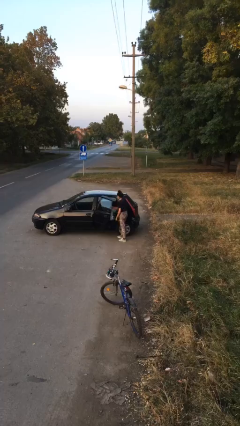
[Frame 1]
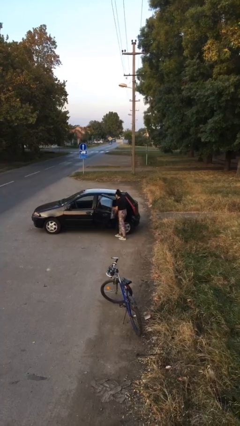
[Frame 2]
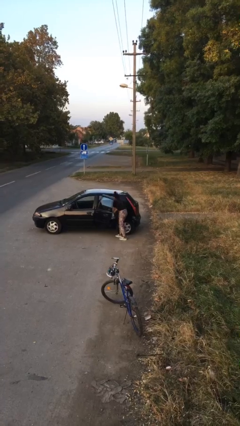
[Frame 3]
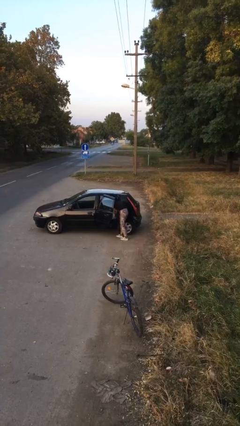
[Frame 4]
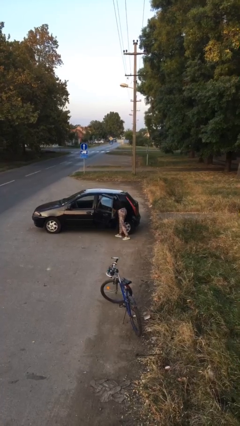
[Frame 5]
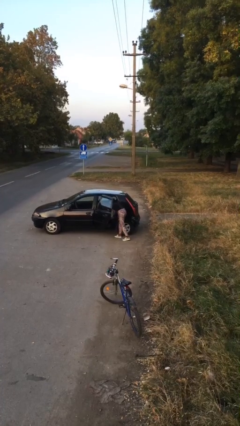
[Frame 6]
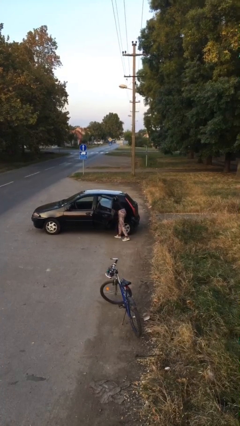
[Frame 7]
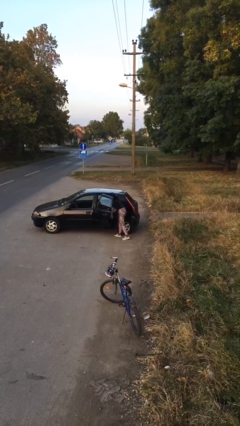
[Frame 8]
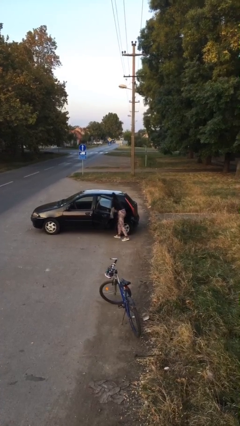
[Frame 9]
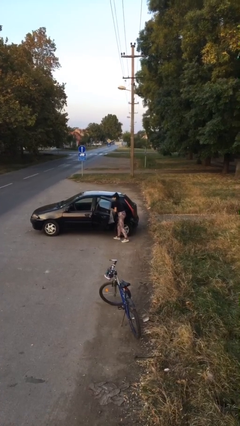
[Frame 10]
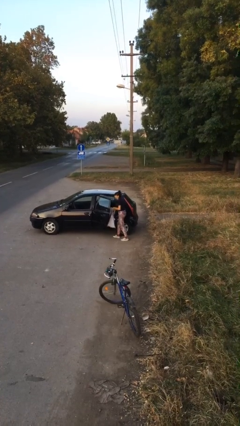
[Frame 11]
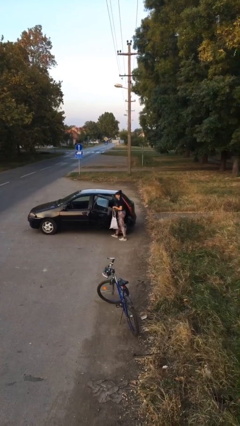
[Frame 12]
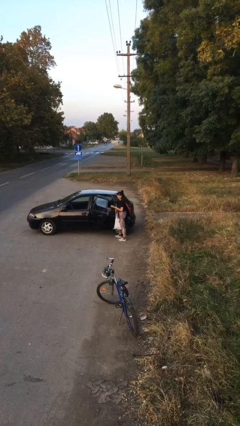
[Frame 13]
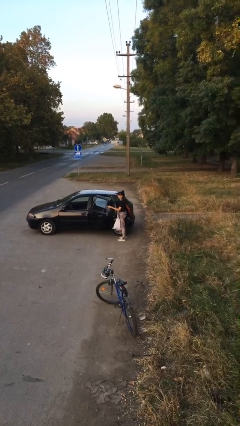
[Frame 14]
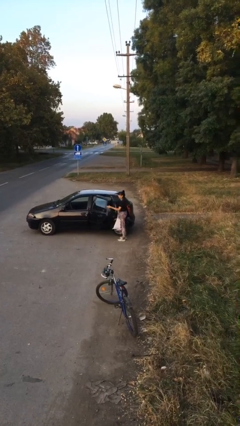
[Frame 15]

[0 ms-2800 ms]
person unloads car

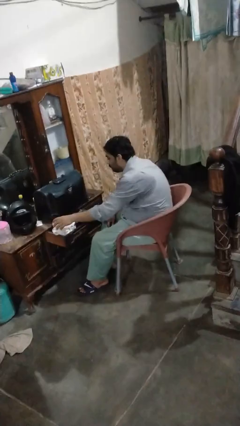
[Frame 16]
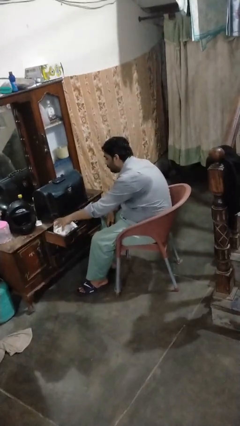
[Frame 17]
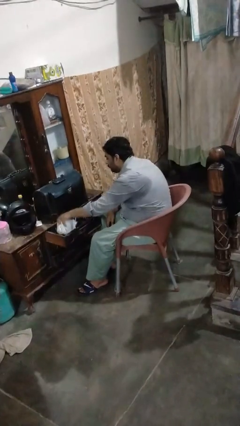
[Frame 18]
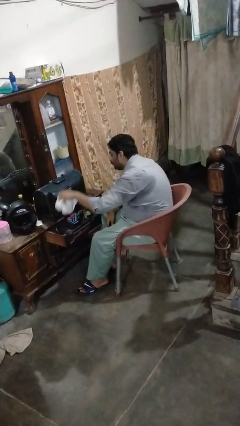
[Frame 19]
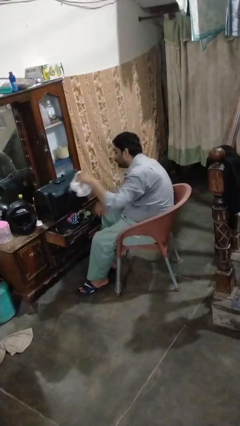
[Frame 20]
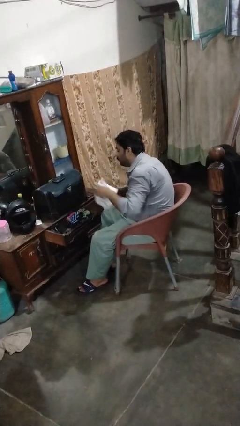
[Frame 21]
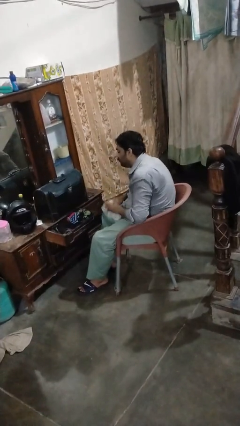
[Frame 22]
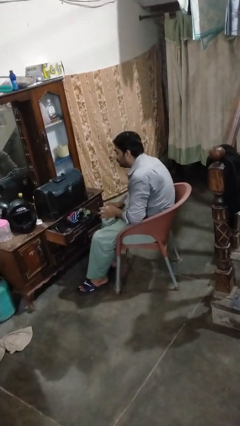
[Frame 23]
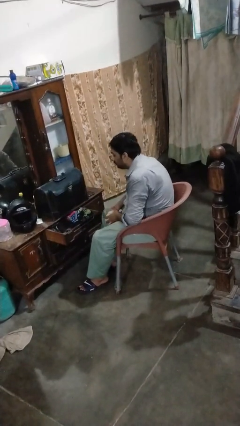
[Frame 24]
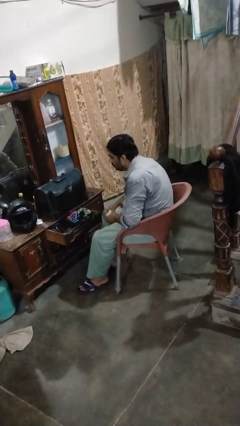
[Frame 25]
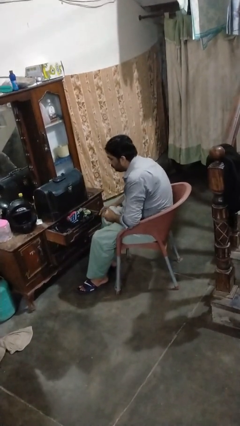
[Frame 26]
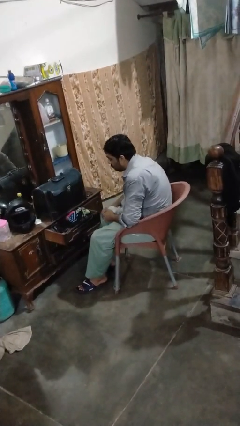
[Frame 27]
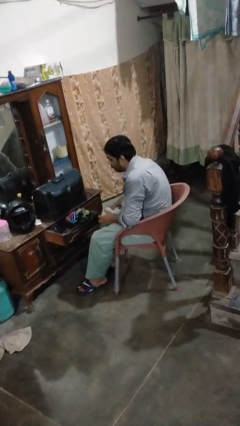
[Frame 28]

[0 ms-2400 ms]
person takes clothes from dresser

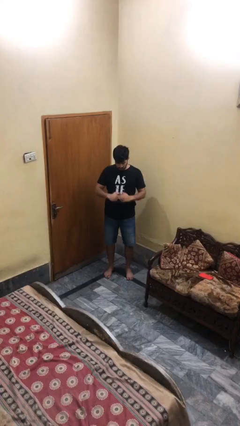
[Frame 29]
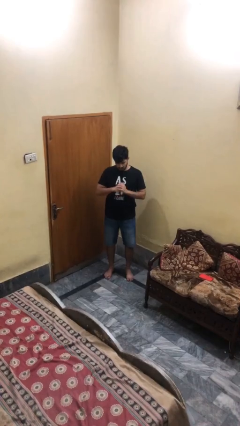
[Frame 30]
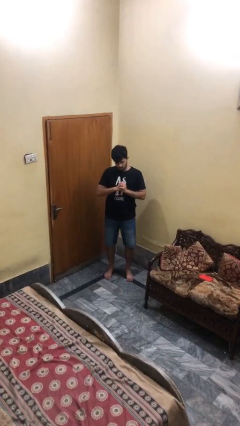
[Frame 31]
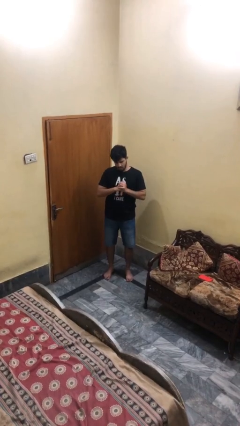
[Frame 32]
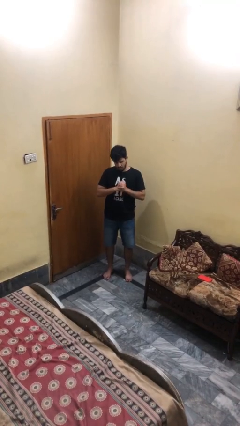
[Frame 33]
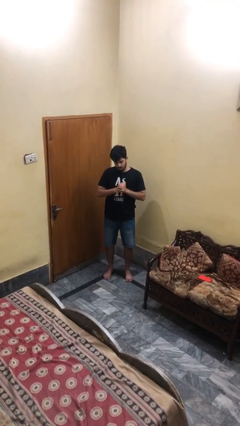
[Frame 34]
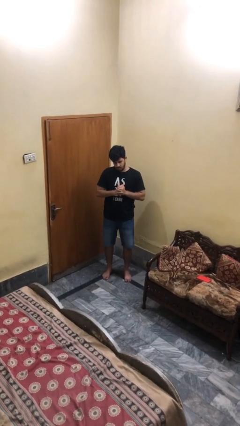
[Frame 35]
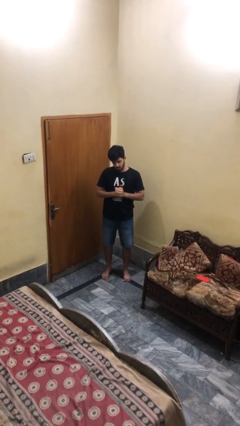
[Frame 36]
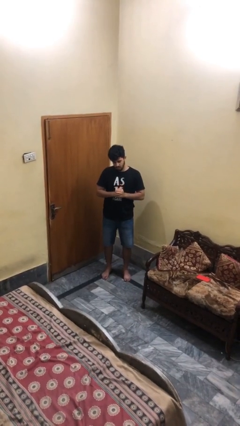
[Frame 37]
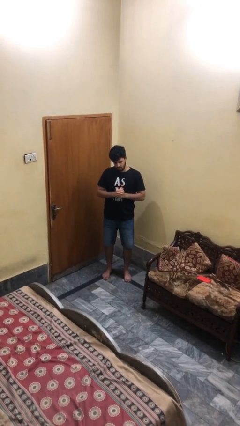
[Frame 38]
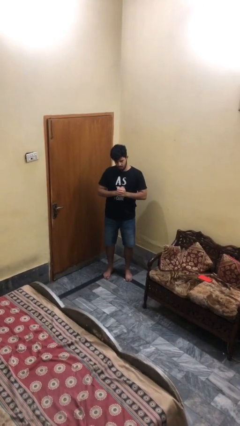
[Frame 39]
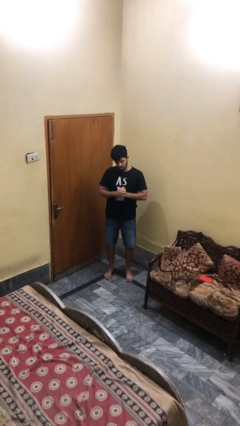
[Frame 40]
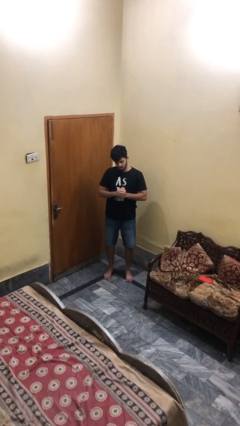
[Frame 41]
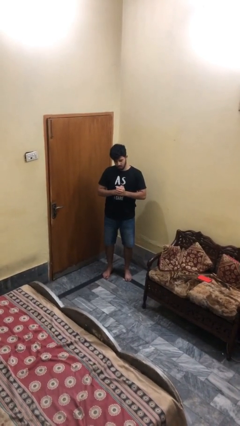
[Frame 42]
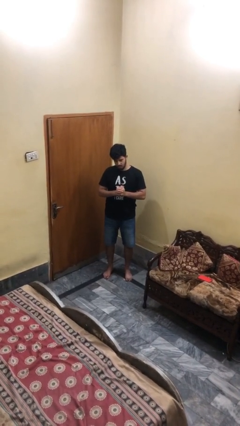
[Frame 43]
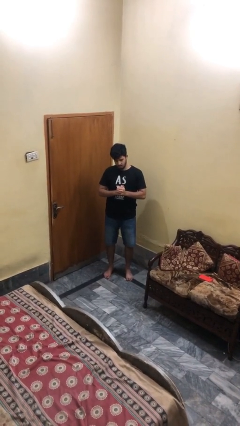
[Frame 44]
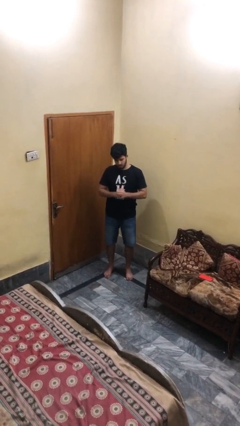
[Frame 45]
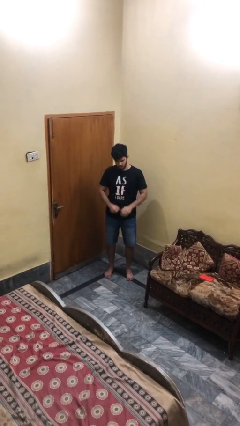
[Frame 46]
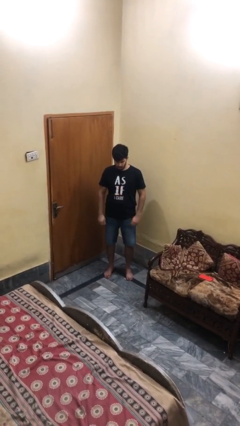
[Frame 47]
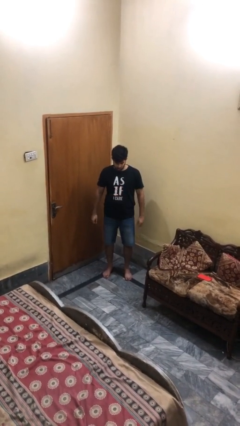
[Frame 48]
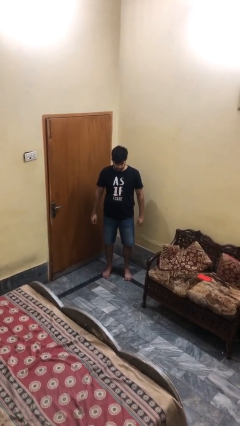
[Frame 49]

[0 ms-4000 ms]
person cracks knuckles

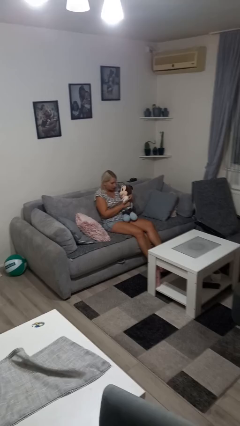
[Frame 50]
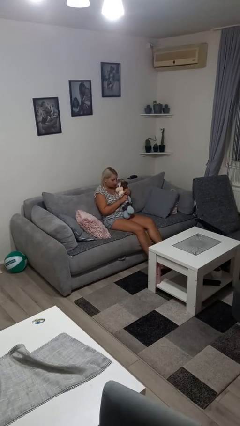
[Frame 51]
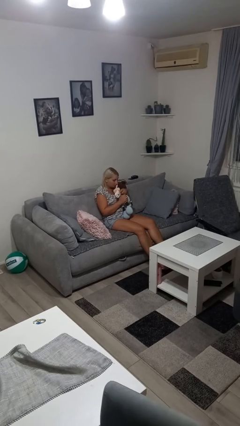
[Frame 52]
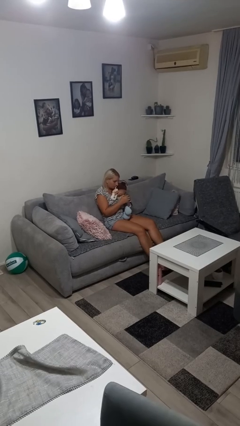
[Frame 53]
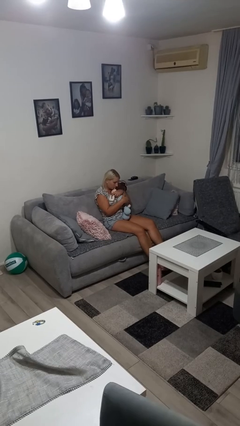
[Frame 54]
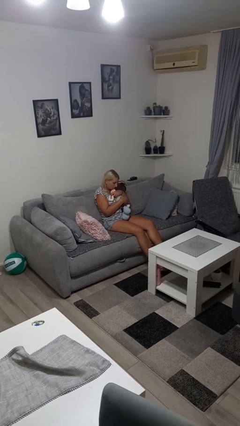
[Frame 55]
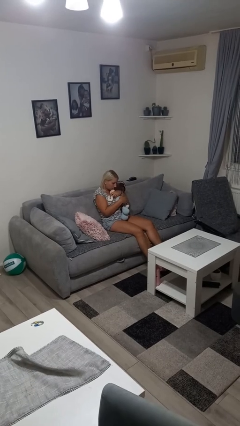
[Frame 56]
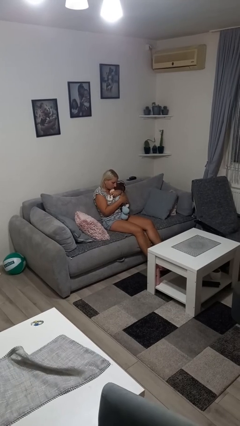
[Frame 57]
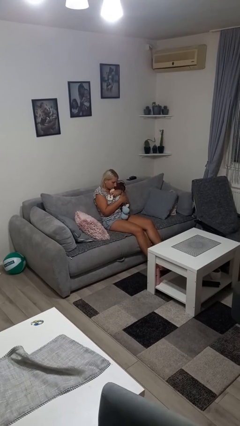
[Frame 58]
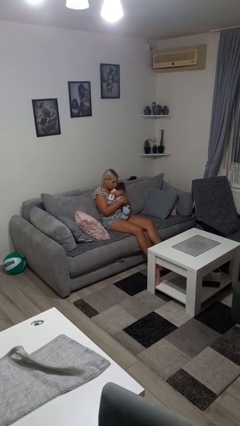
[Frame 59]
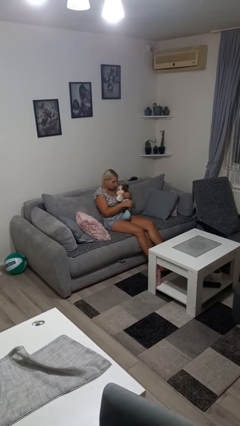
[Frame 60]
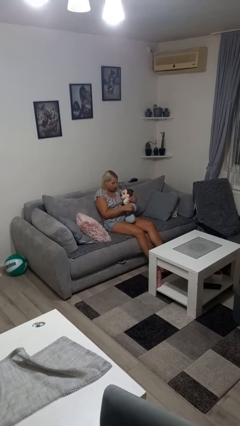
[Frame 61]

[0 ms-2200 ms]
person hugs stuffed animal

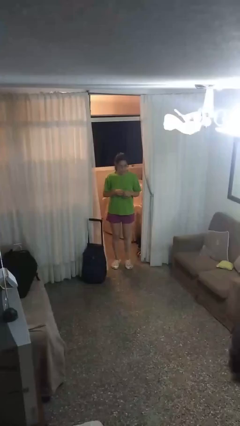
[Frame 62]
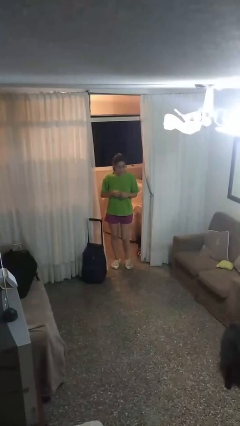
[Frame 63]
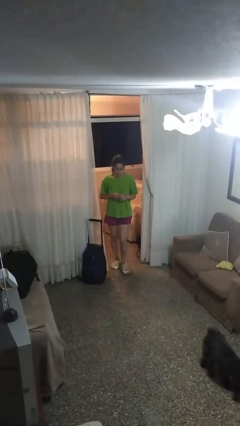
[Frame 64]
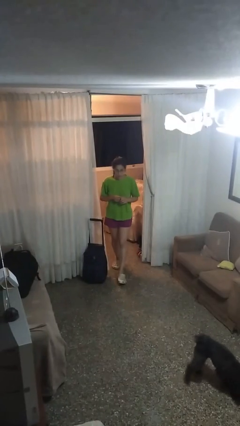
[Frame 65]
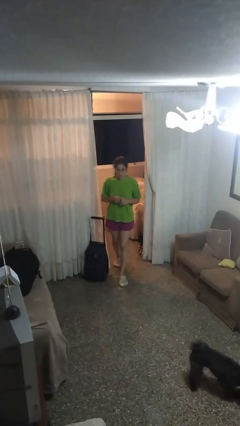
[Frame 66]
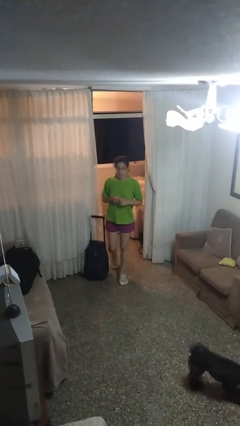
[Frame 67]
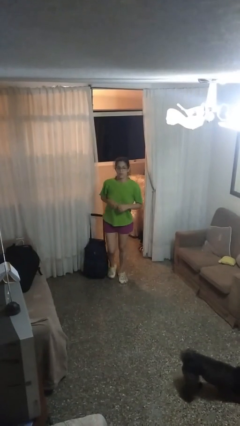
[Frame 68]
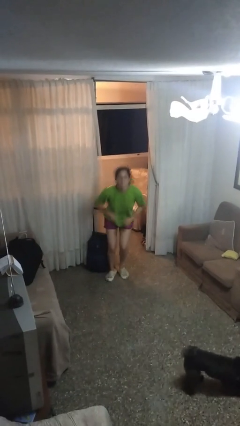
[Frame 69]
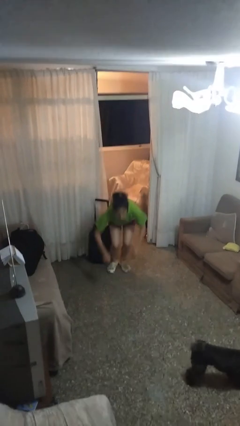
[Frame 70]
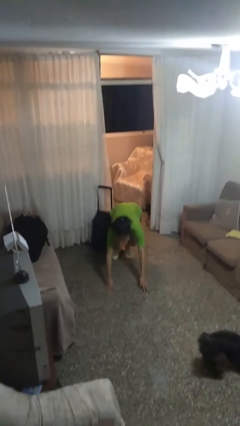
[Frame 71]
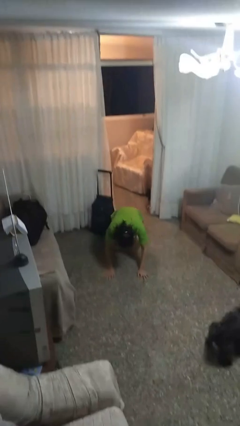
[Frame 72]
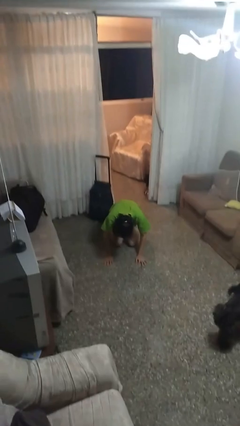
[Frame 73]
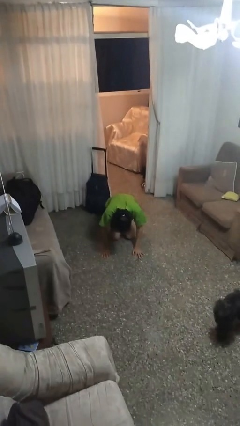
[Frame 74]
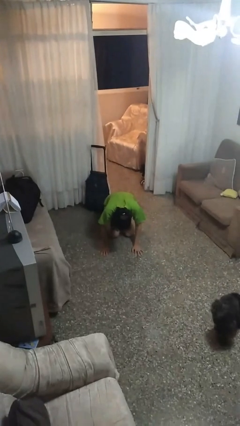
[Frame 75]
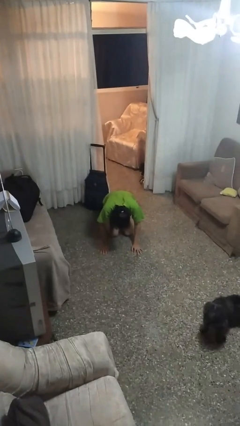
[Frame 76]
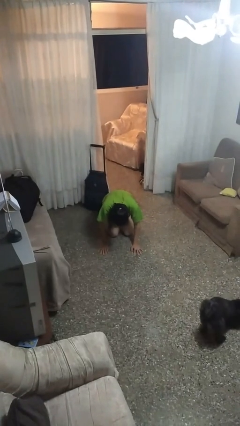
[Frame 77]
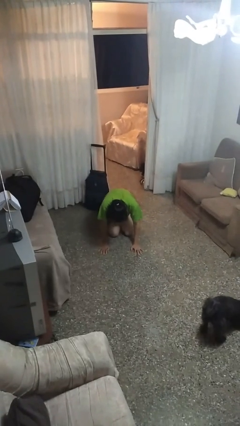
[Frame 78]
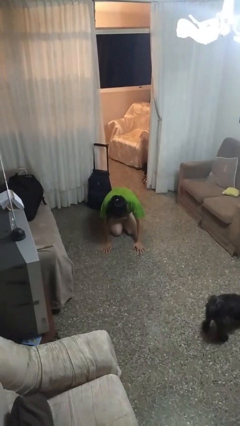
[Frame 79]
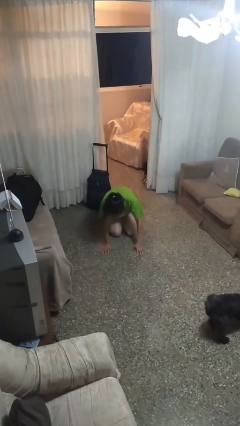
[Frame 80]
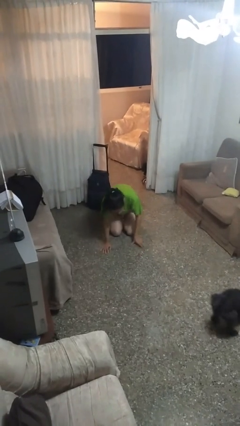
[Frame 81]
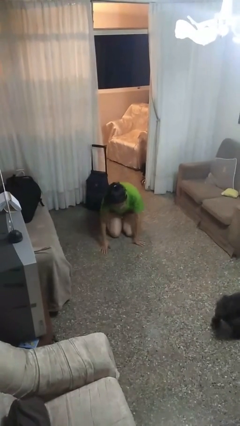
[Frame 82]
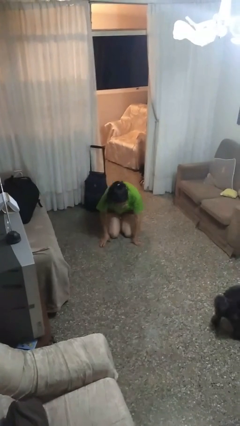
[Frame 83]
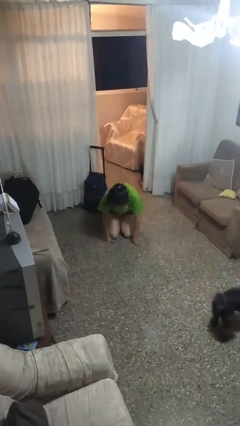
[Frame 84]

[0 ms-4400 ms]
person trips on object on floor

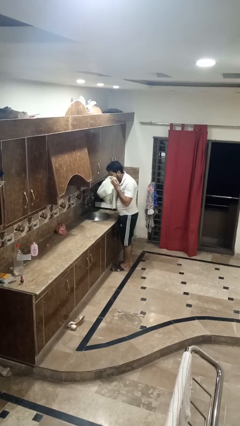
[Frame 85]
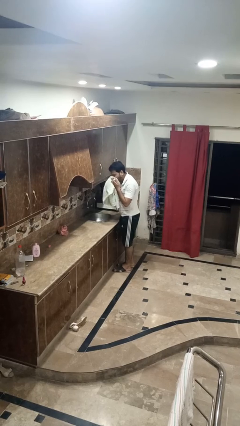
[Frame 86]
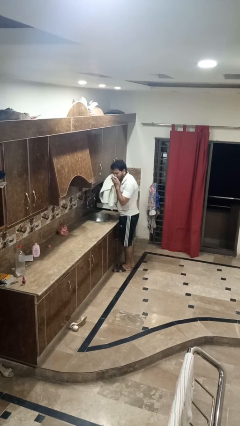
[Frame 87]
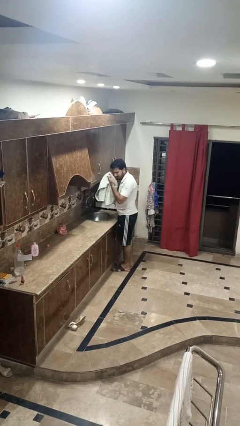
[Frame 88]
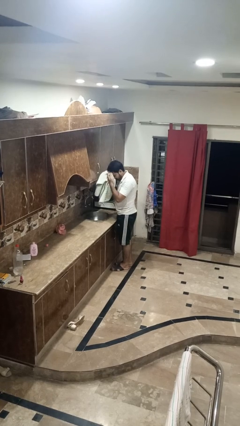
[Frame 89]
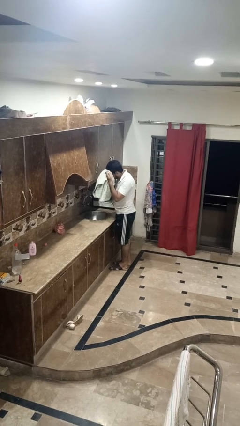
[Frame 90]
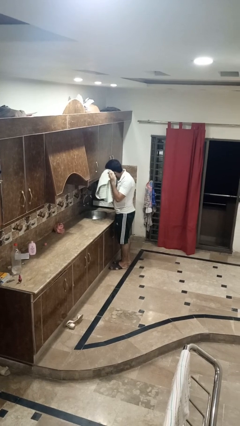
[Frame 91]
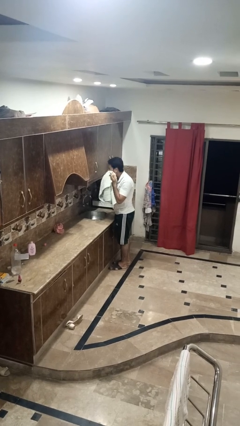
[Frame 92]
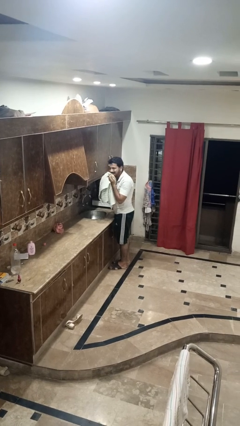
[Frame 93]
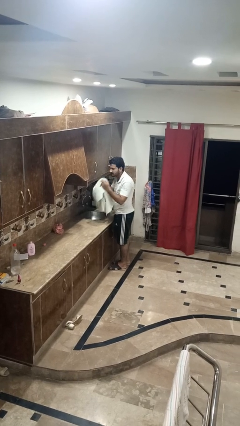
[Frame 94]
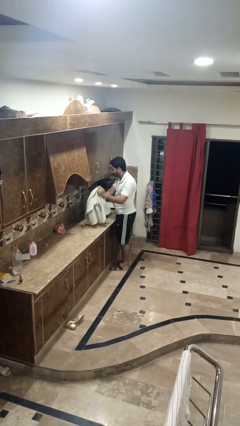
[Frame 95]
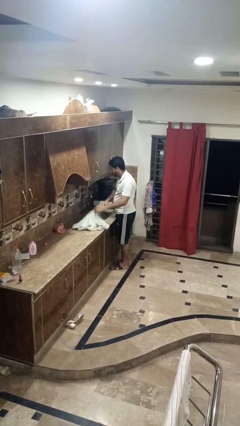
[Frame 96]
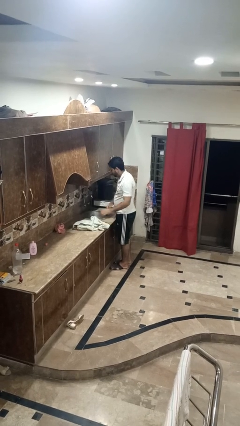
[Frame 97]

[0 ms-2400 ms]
person dries face with towel
